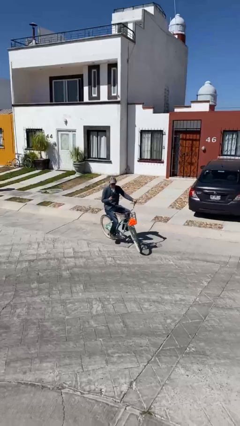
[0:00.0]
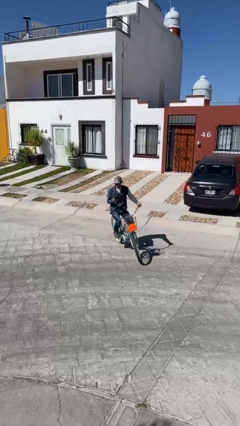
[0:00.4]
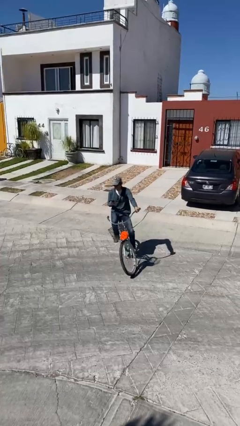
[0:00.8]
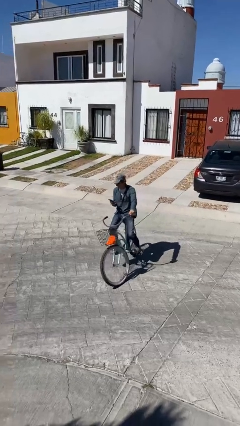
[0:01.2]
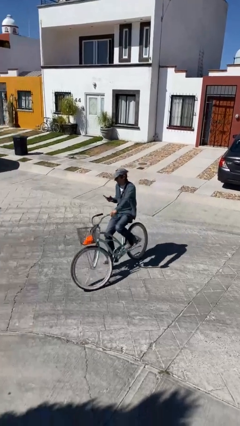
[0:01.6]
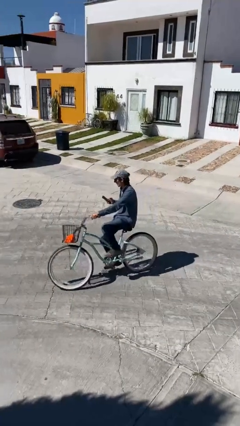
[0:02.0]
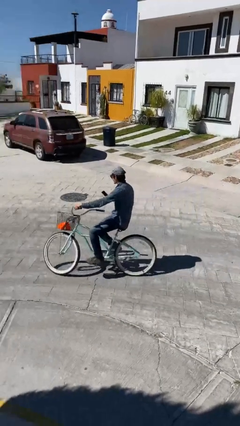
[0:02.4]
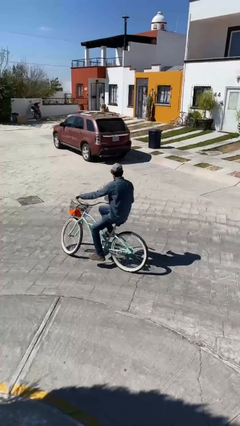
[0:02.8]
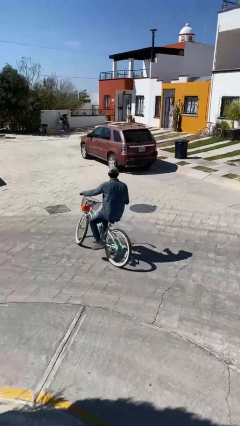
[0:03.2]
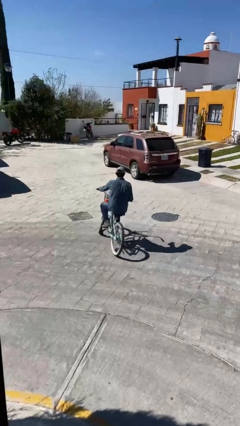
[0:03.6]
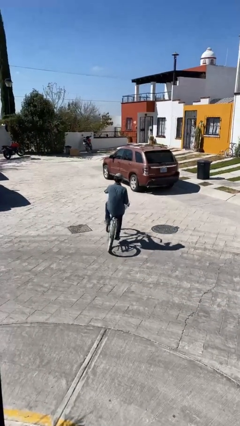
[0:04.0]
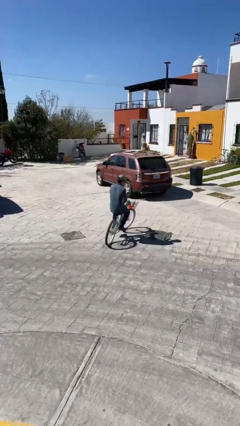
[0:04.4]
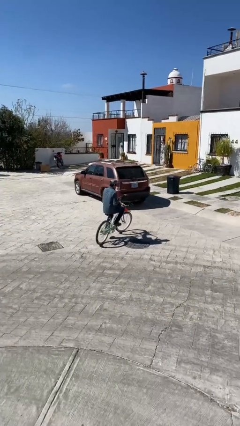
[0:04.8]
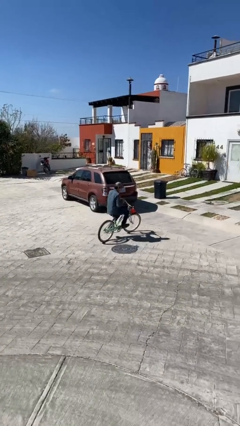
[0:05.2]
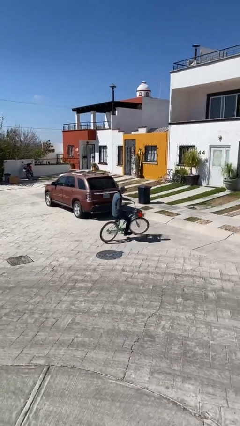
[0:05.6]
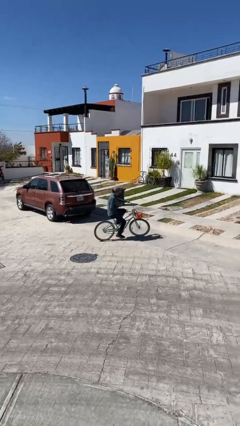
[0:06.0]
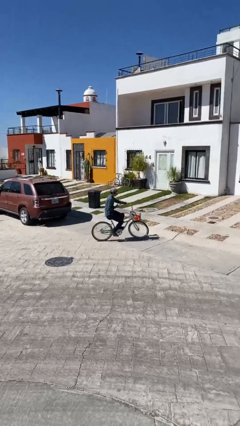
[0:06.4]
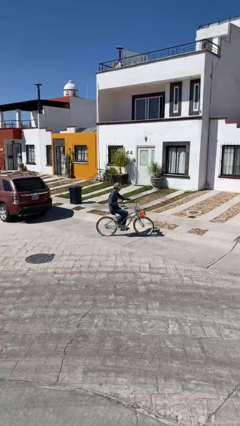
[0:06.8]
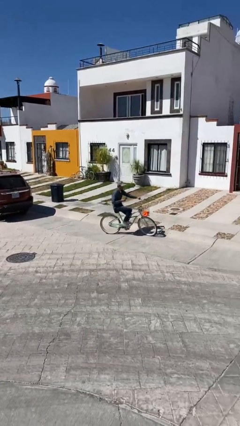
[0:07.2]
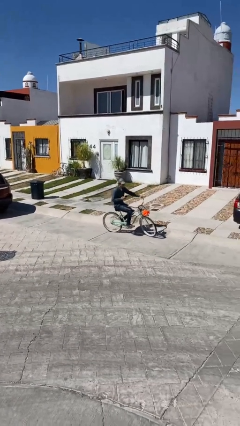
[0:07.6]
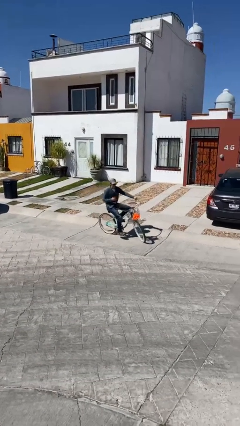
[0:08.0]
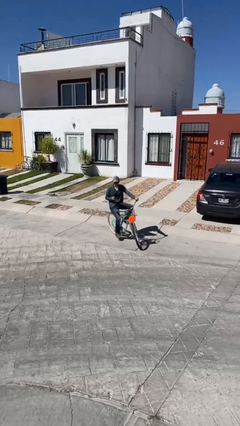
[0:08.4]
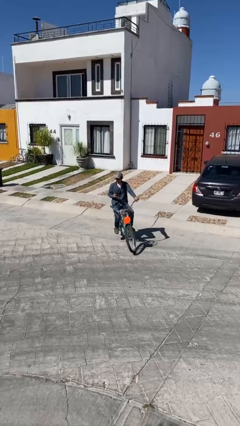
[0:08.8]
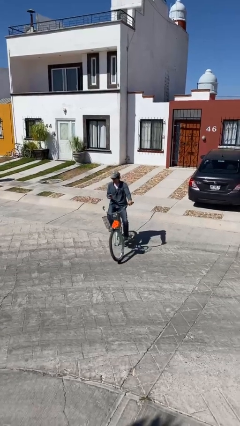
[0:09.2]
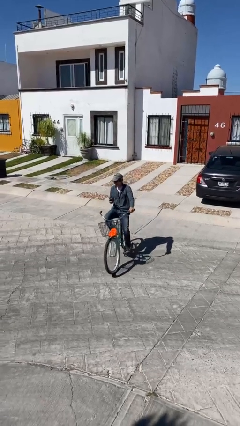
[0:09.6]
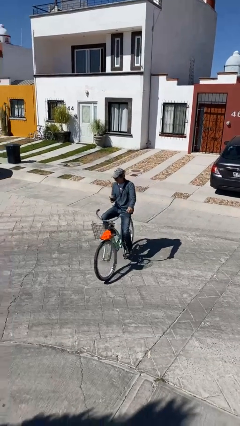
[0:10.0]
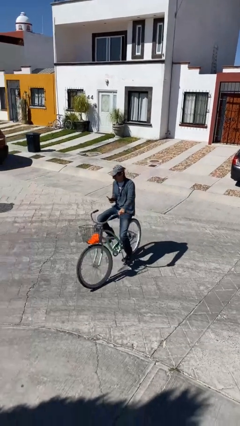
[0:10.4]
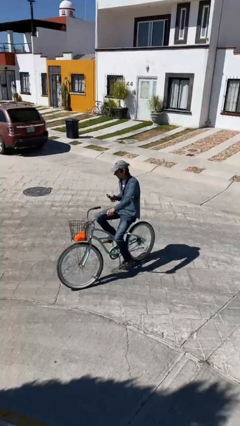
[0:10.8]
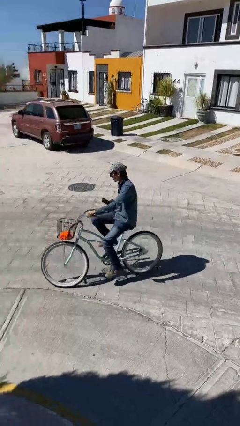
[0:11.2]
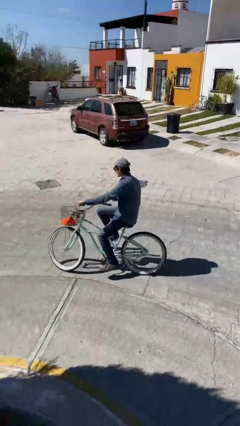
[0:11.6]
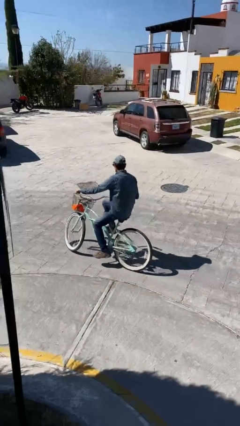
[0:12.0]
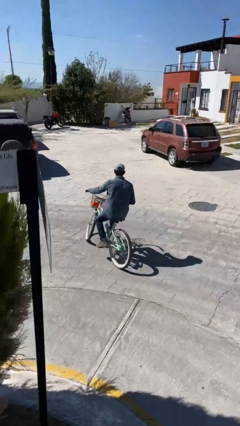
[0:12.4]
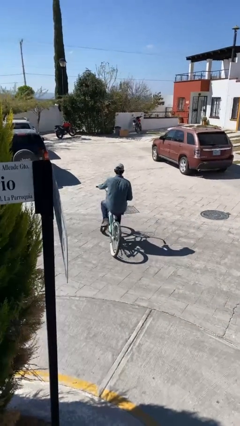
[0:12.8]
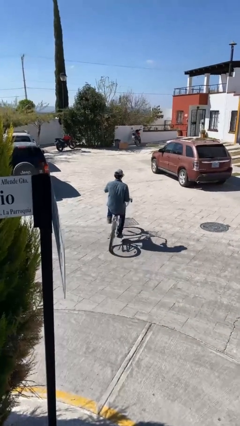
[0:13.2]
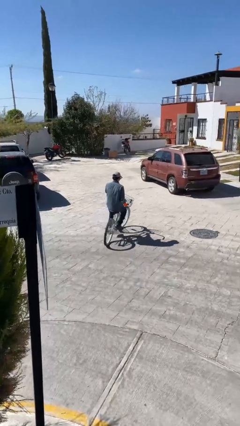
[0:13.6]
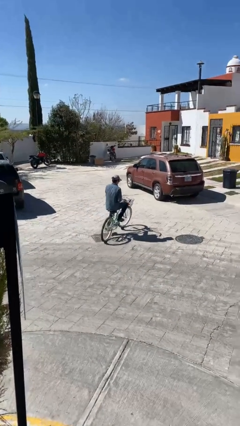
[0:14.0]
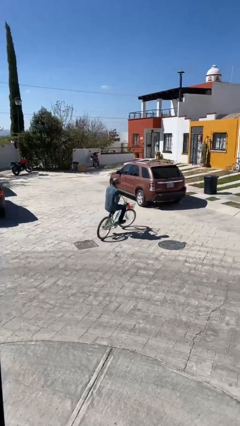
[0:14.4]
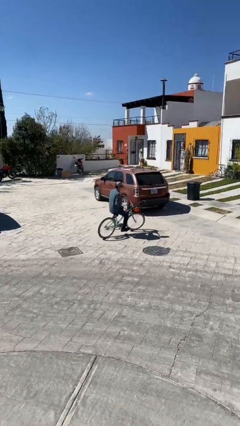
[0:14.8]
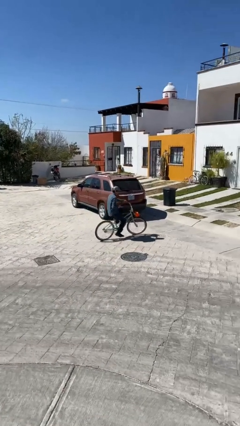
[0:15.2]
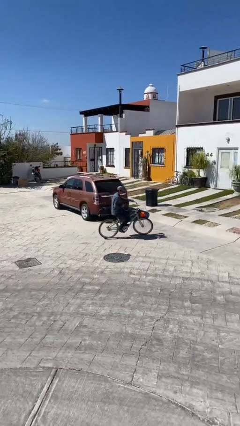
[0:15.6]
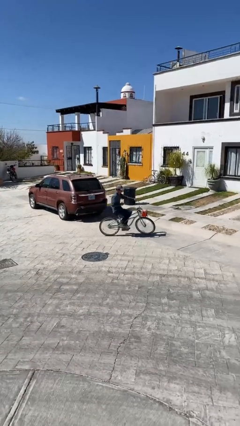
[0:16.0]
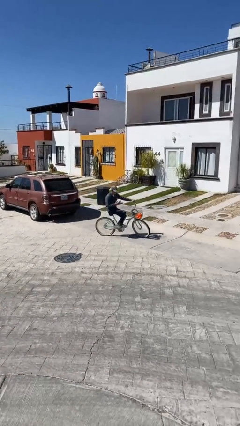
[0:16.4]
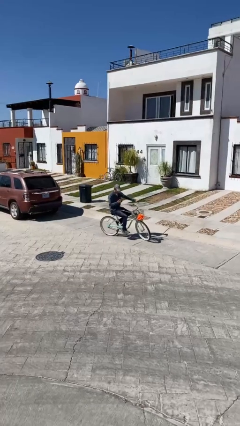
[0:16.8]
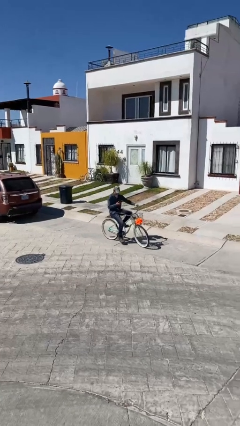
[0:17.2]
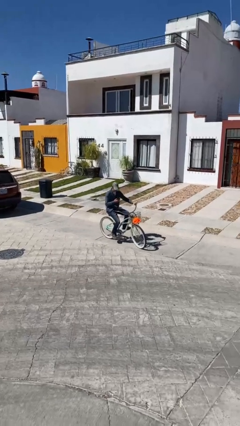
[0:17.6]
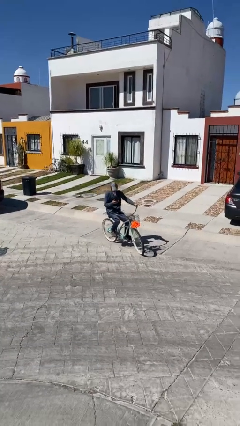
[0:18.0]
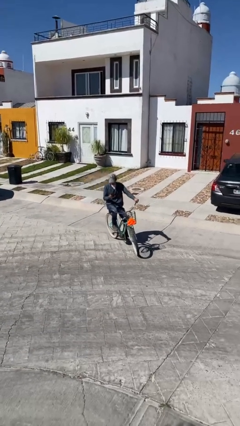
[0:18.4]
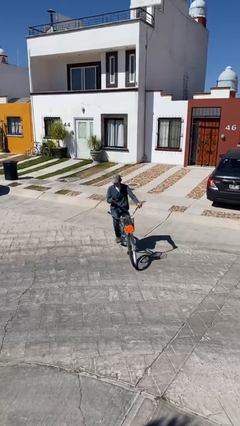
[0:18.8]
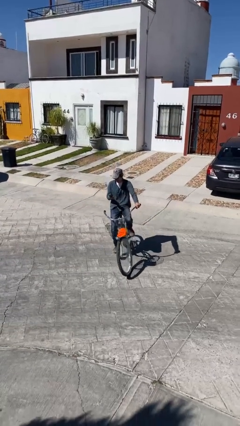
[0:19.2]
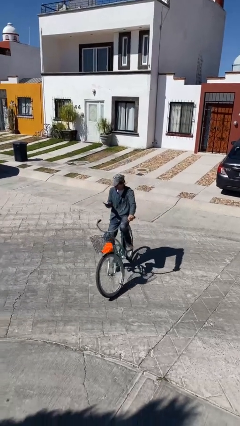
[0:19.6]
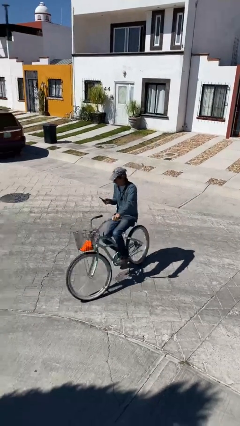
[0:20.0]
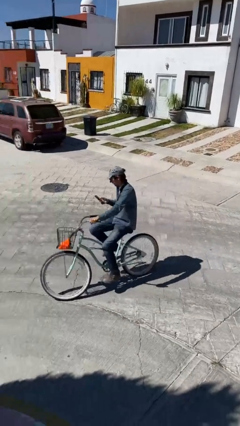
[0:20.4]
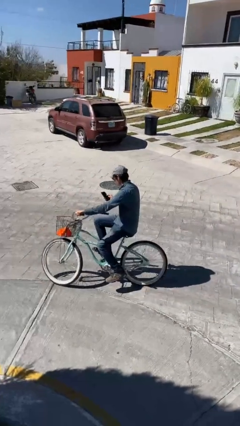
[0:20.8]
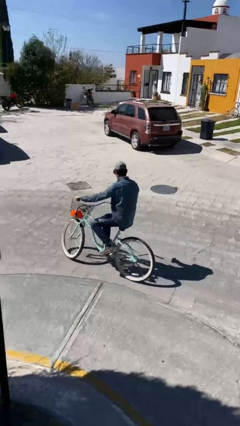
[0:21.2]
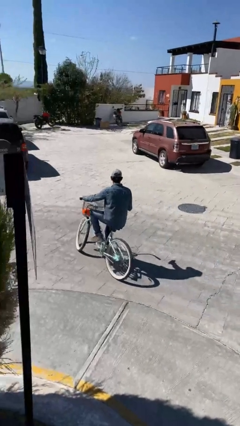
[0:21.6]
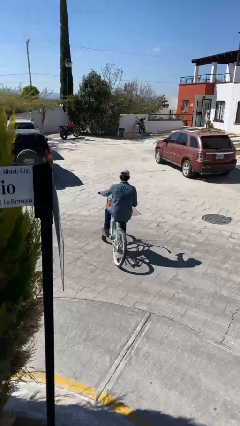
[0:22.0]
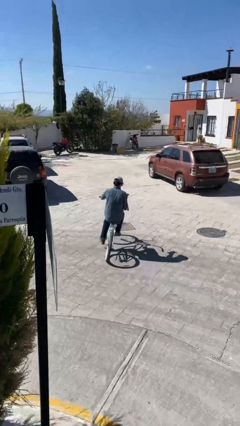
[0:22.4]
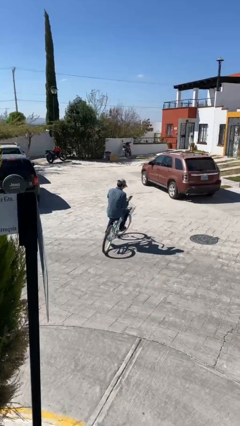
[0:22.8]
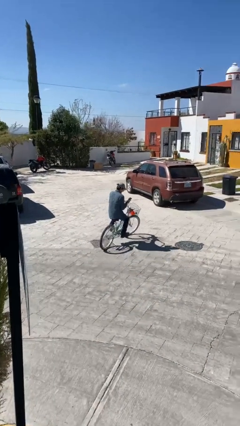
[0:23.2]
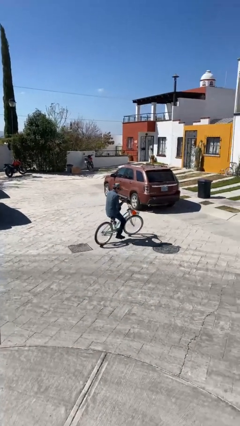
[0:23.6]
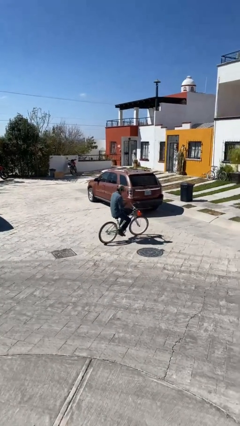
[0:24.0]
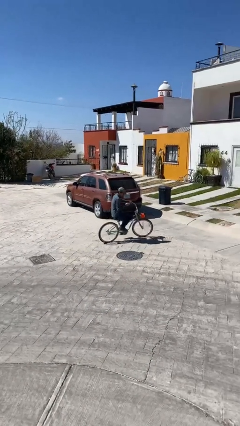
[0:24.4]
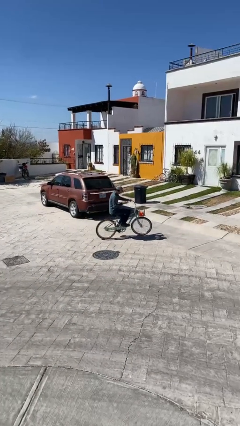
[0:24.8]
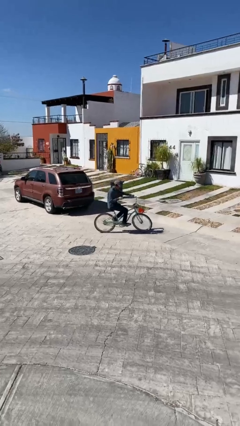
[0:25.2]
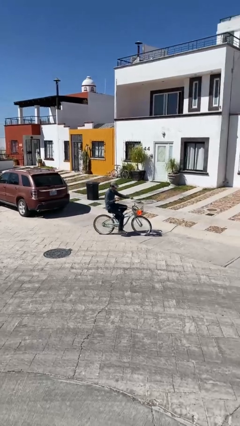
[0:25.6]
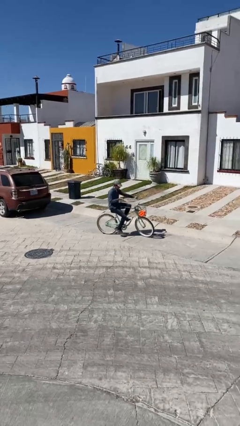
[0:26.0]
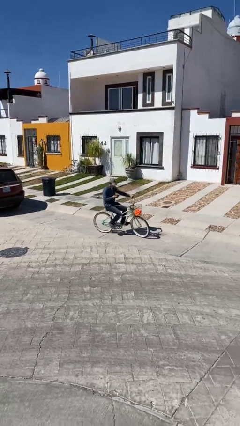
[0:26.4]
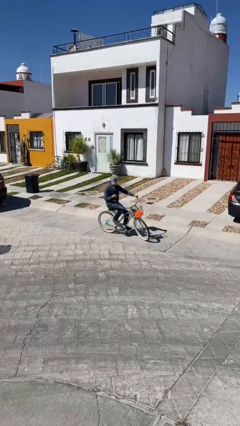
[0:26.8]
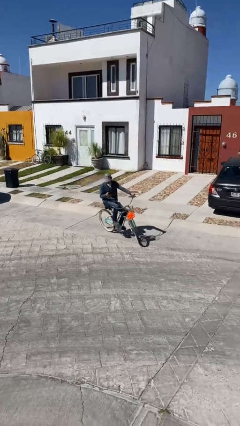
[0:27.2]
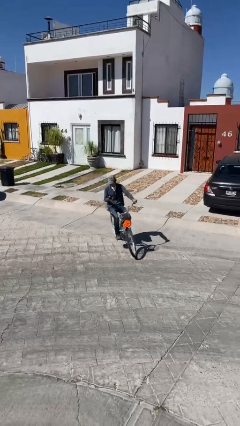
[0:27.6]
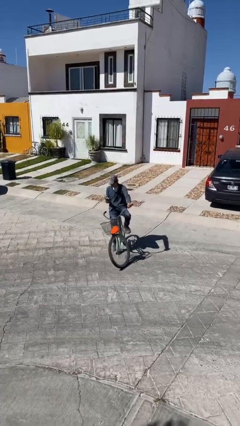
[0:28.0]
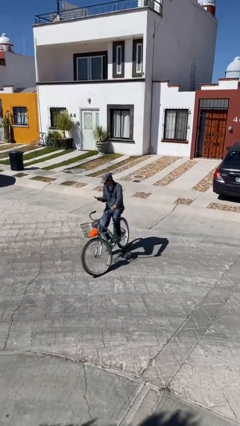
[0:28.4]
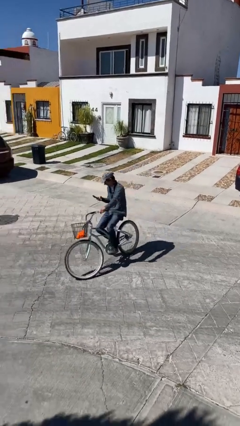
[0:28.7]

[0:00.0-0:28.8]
person rides bicycle

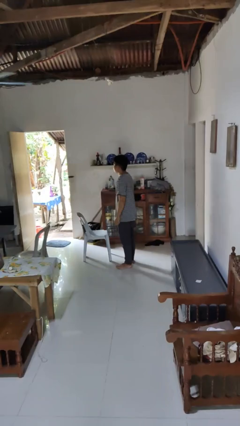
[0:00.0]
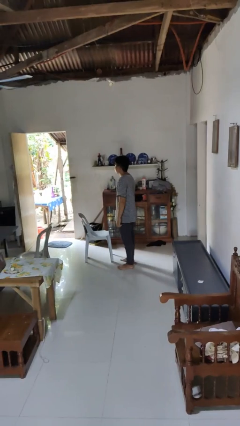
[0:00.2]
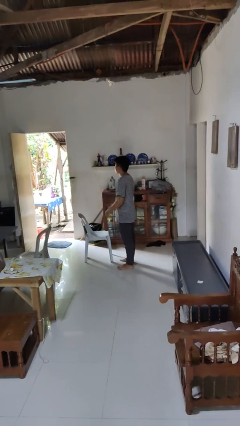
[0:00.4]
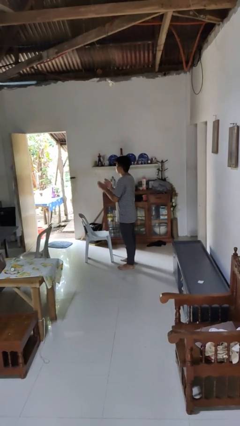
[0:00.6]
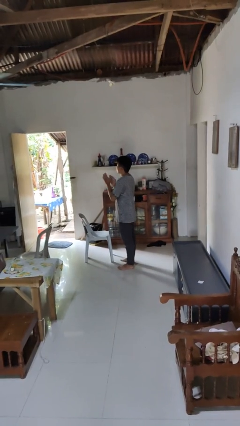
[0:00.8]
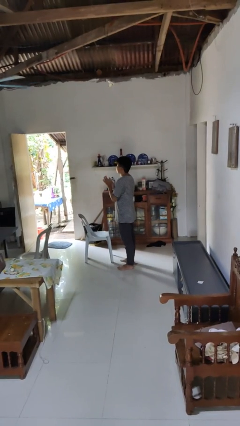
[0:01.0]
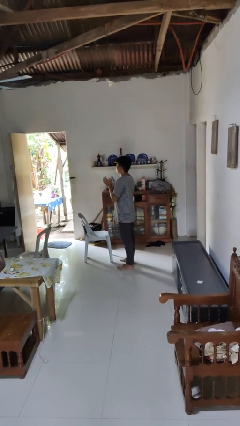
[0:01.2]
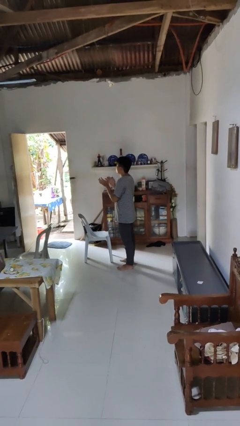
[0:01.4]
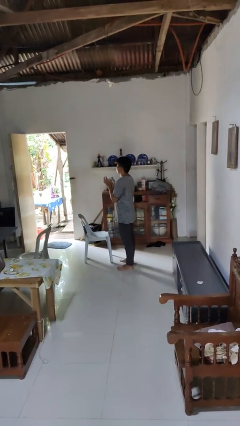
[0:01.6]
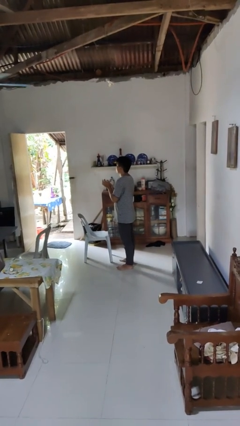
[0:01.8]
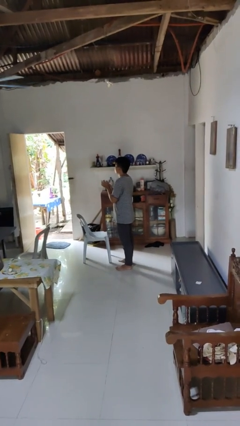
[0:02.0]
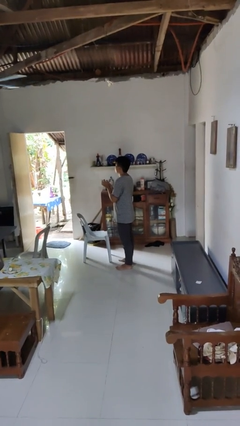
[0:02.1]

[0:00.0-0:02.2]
person claps hands

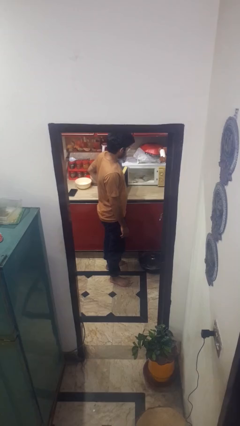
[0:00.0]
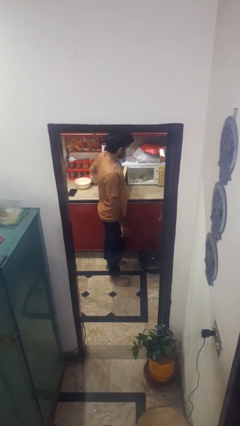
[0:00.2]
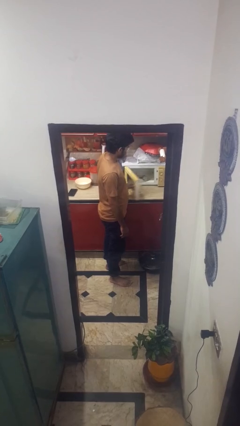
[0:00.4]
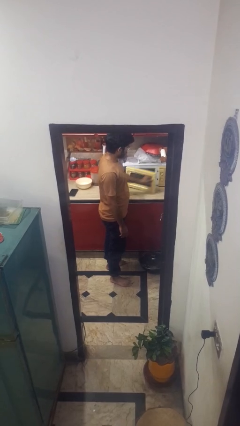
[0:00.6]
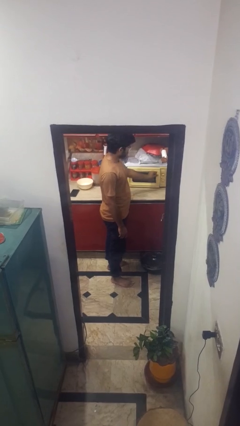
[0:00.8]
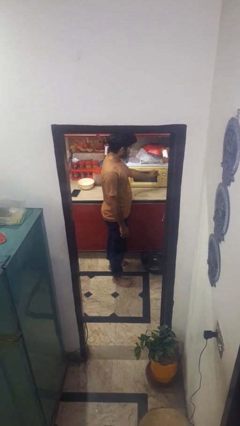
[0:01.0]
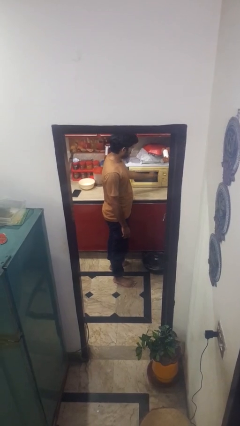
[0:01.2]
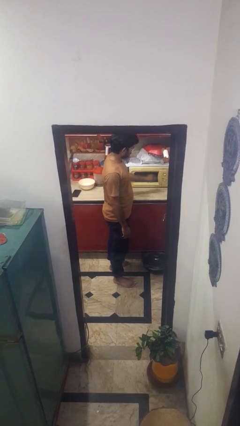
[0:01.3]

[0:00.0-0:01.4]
person closes microwave
